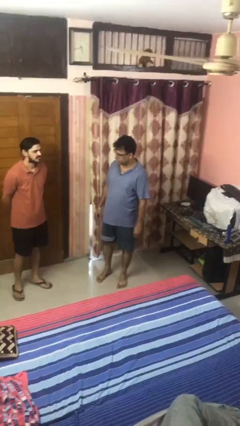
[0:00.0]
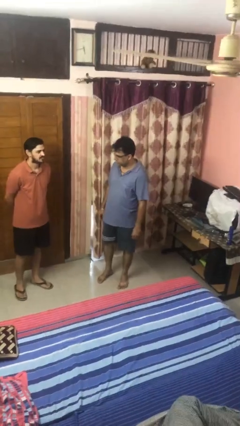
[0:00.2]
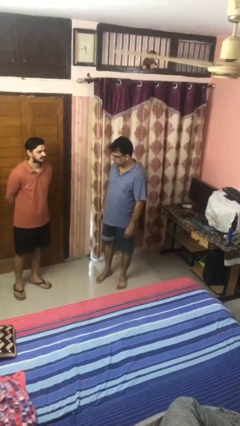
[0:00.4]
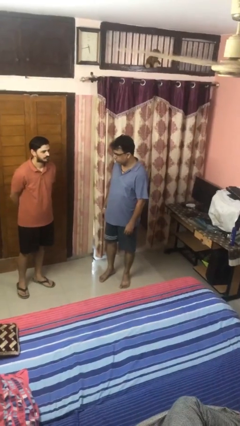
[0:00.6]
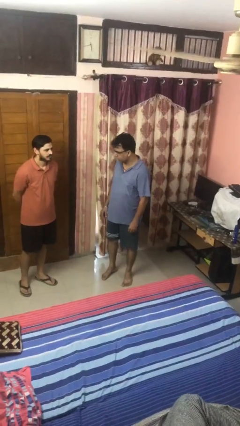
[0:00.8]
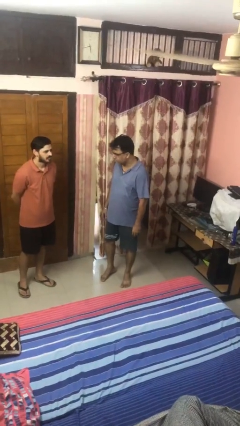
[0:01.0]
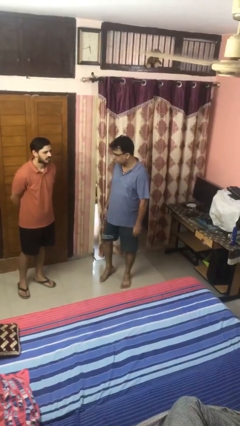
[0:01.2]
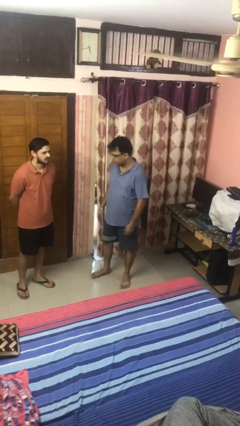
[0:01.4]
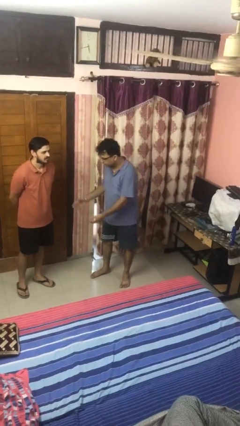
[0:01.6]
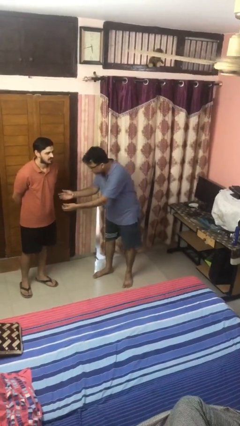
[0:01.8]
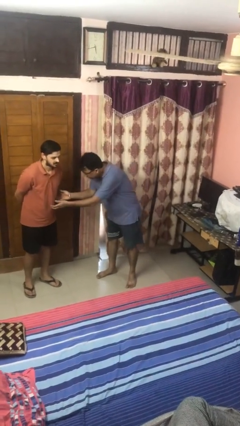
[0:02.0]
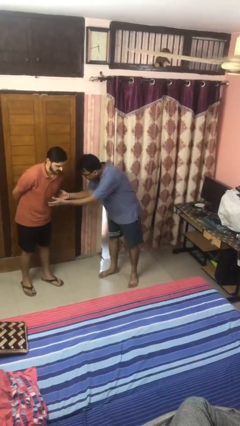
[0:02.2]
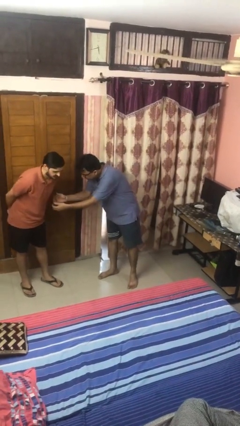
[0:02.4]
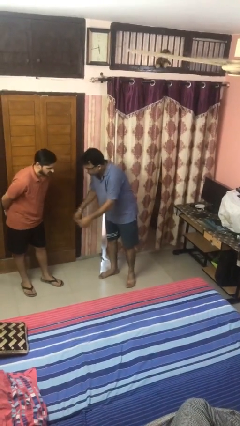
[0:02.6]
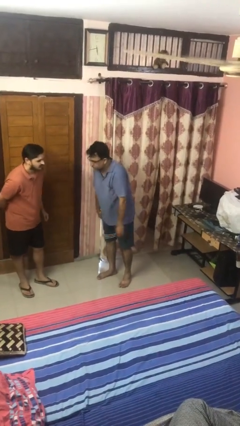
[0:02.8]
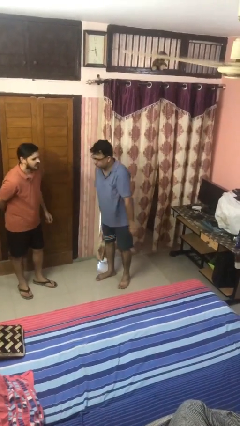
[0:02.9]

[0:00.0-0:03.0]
person tickles person

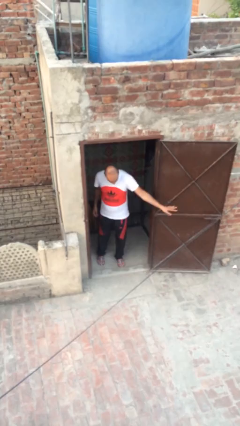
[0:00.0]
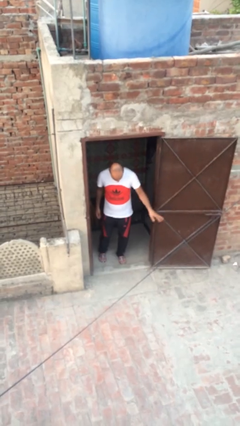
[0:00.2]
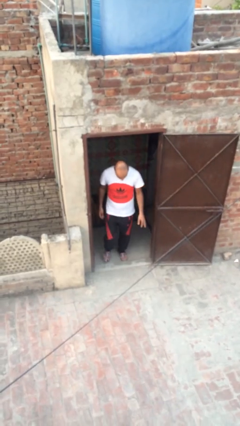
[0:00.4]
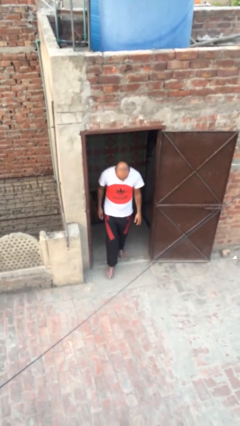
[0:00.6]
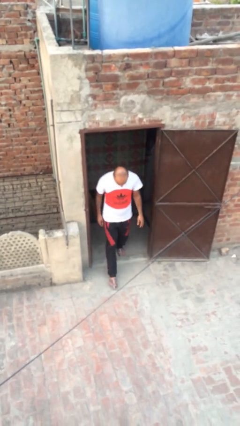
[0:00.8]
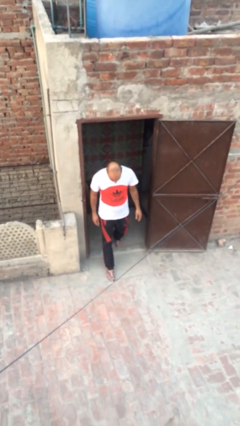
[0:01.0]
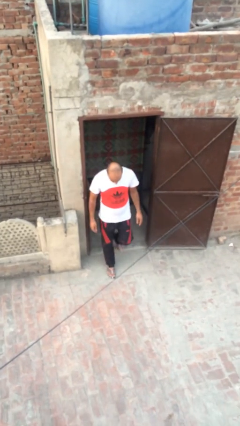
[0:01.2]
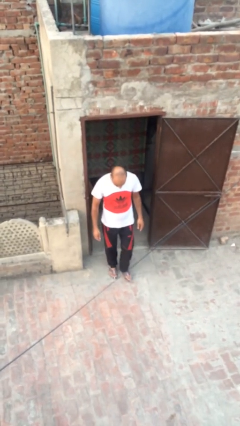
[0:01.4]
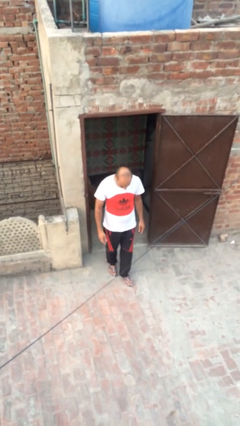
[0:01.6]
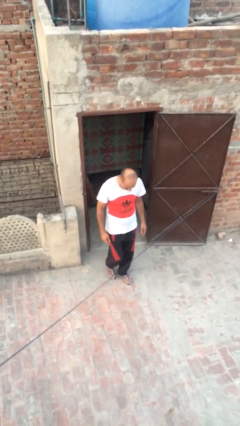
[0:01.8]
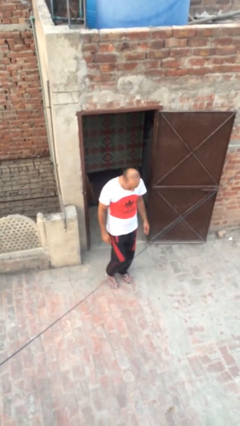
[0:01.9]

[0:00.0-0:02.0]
person enters scene through structure

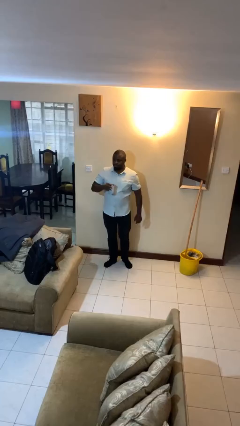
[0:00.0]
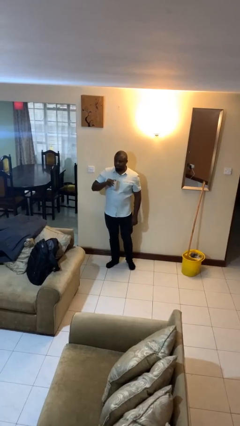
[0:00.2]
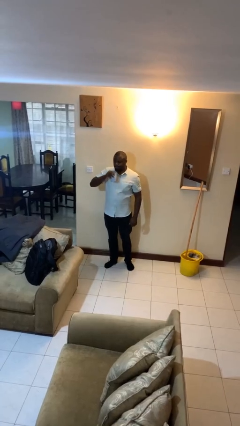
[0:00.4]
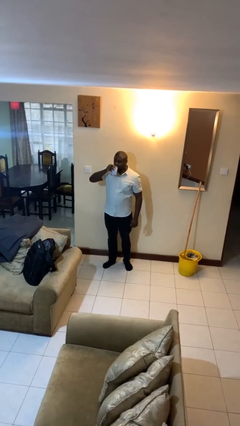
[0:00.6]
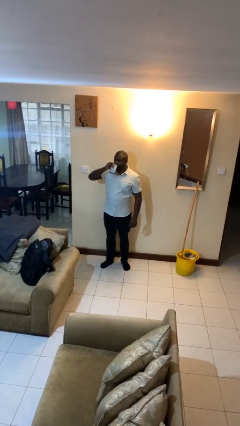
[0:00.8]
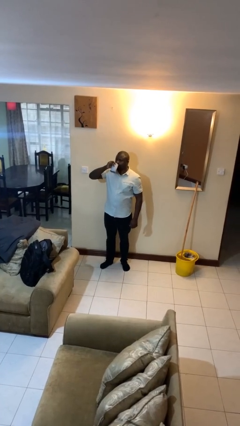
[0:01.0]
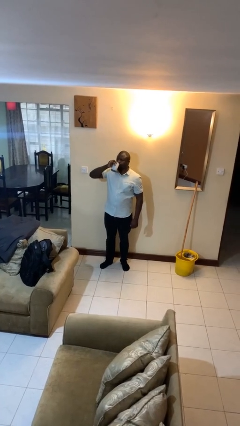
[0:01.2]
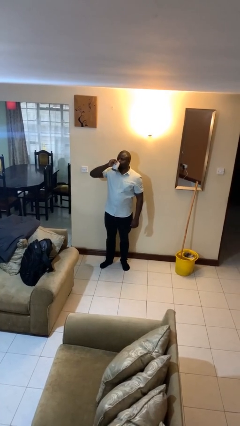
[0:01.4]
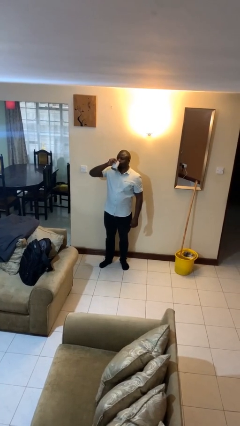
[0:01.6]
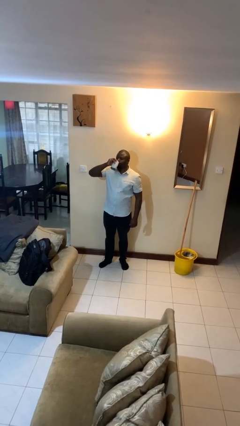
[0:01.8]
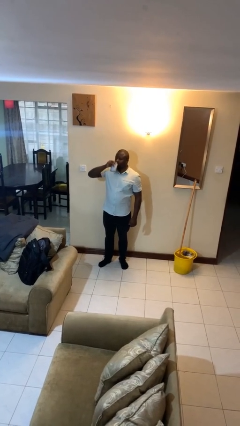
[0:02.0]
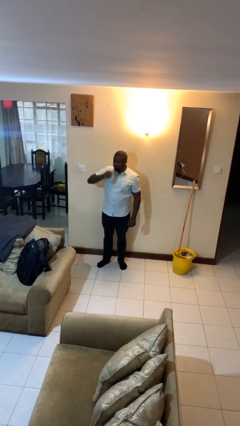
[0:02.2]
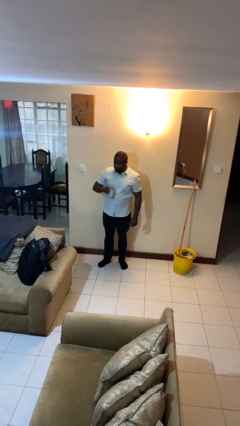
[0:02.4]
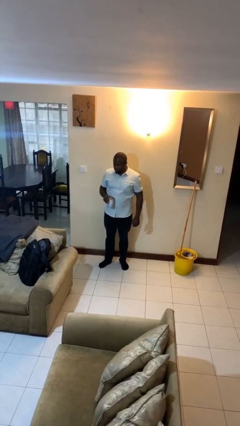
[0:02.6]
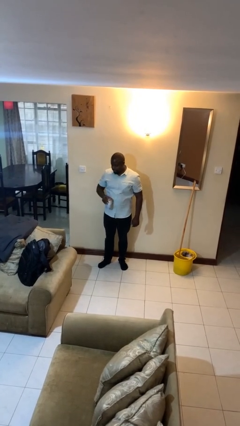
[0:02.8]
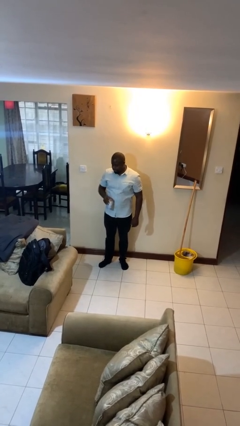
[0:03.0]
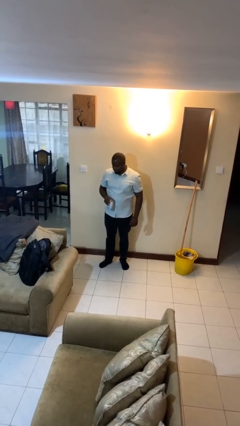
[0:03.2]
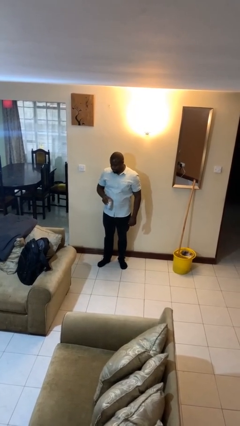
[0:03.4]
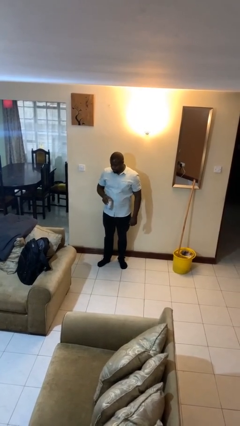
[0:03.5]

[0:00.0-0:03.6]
person drinks from beverage can

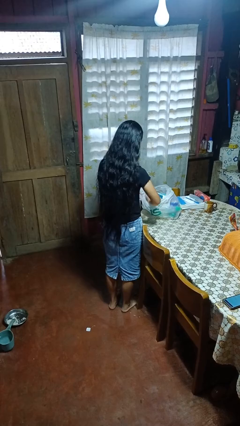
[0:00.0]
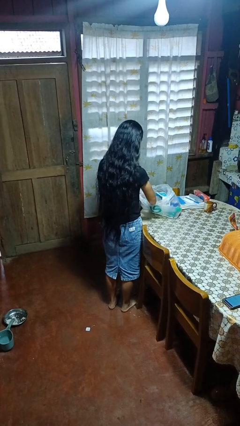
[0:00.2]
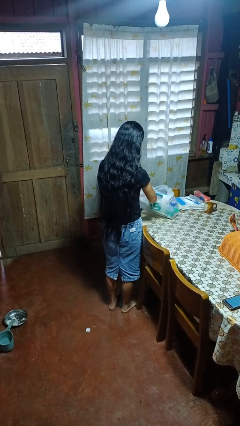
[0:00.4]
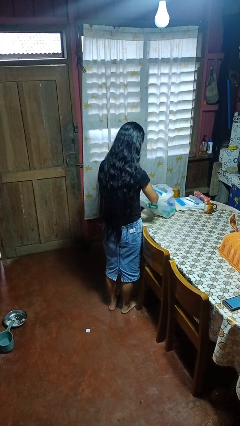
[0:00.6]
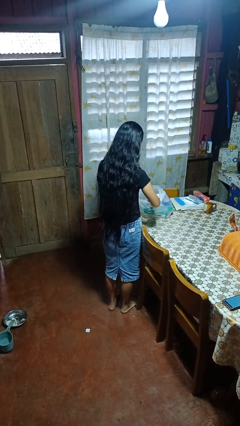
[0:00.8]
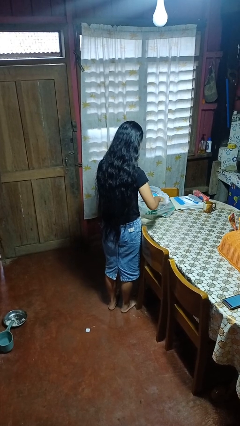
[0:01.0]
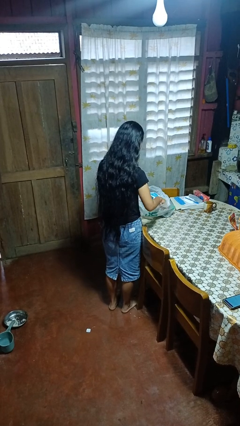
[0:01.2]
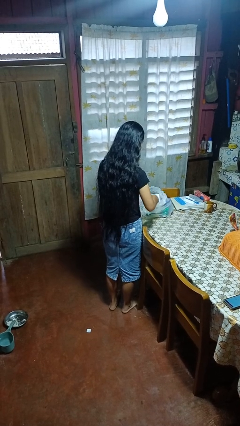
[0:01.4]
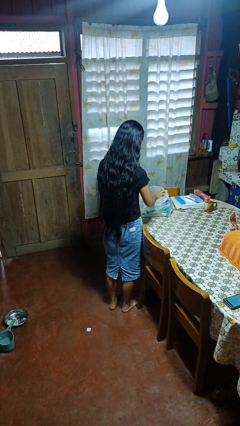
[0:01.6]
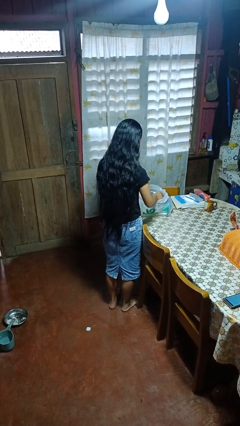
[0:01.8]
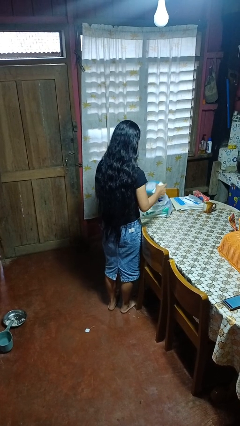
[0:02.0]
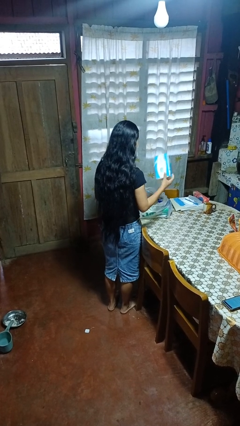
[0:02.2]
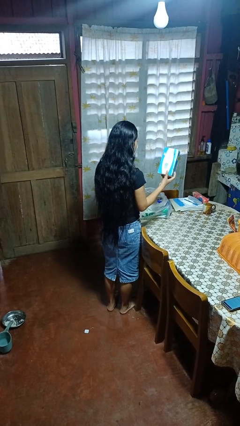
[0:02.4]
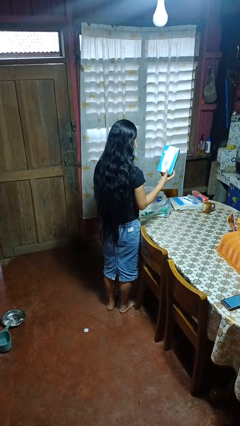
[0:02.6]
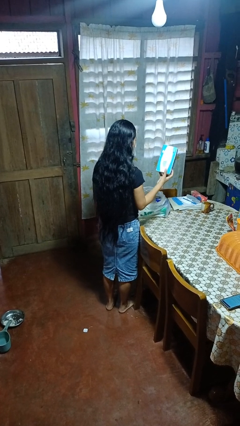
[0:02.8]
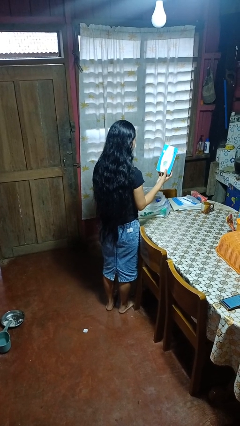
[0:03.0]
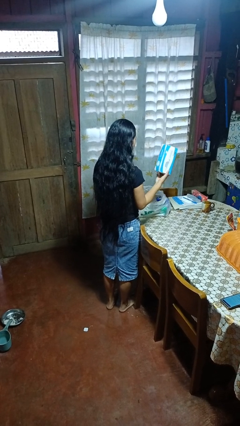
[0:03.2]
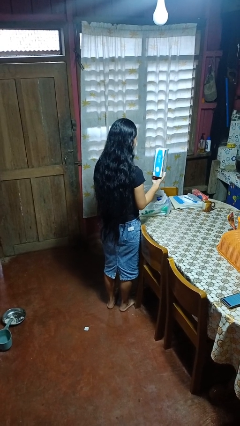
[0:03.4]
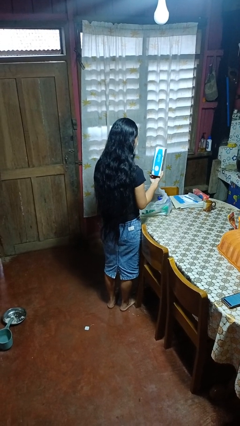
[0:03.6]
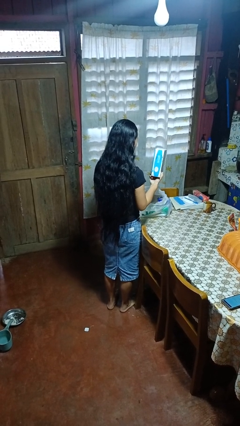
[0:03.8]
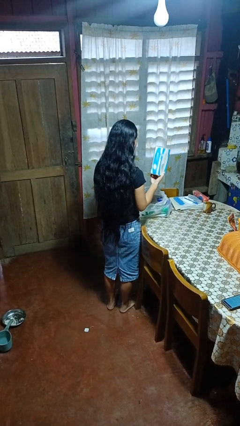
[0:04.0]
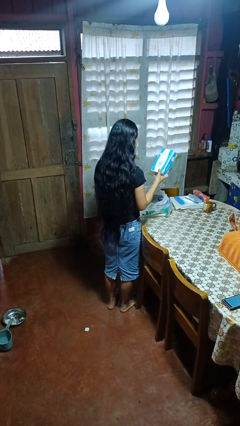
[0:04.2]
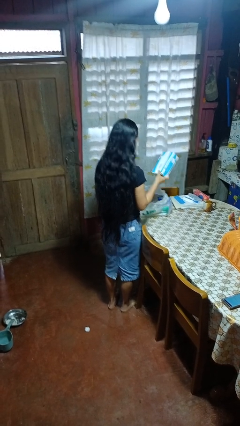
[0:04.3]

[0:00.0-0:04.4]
person takes object from bag

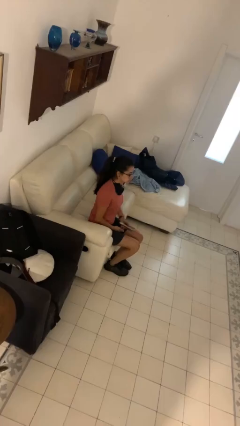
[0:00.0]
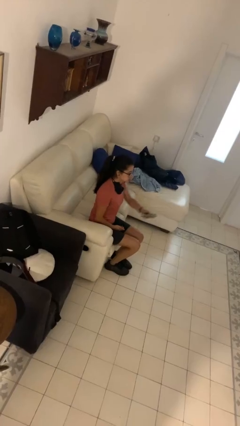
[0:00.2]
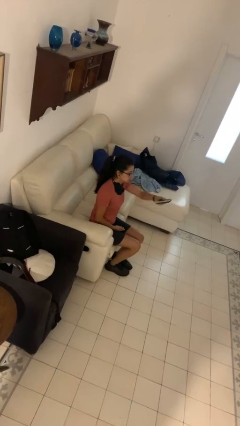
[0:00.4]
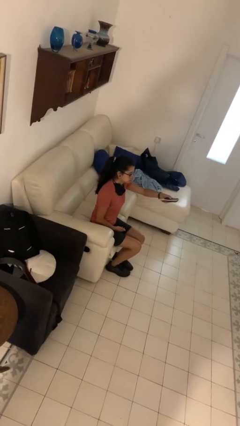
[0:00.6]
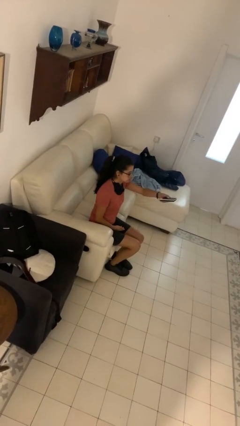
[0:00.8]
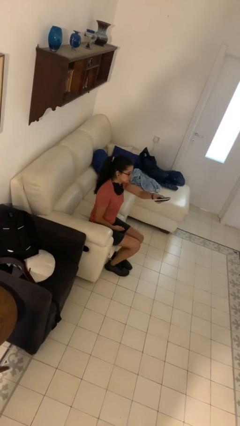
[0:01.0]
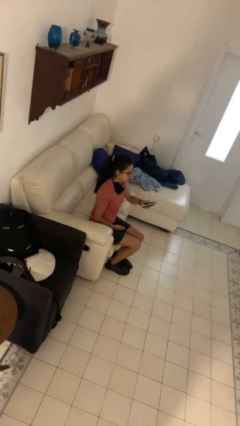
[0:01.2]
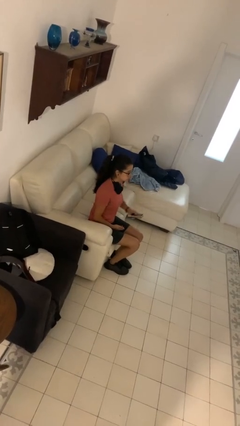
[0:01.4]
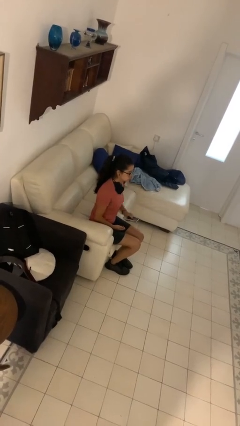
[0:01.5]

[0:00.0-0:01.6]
person uses television remote

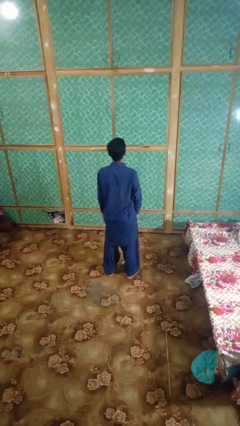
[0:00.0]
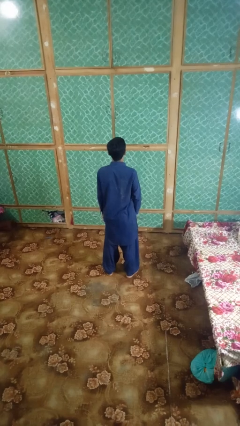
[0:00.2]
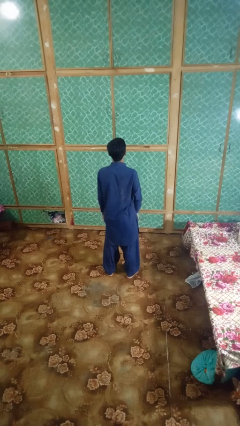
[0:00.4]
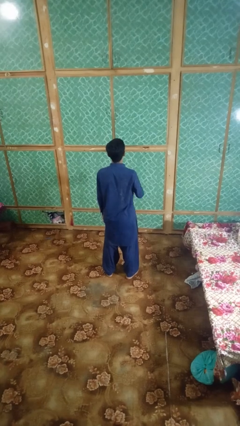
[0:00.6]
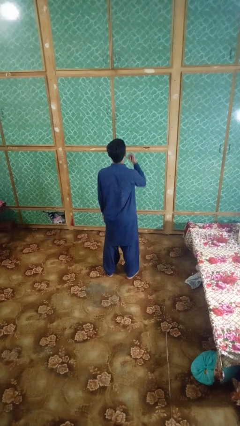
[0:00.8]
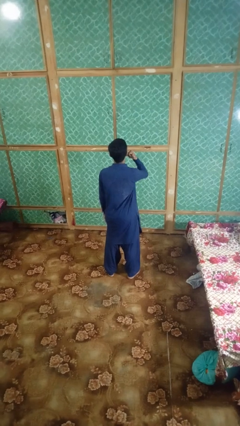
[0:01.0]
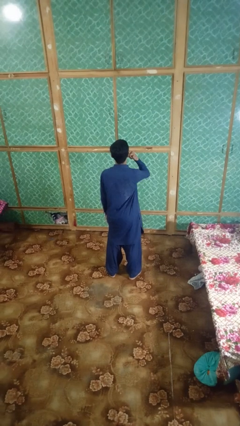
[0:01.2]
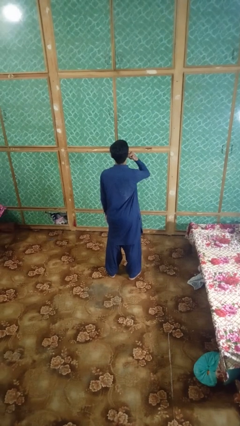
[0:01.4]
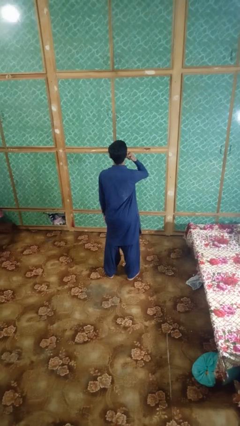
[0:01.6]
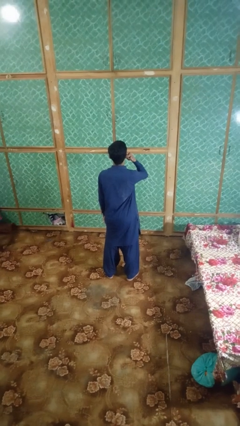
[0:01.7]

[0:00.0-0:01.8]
person gestures call me

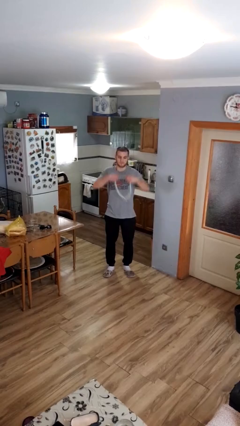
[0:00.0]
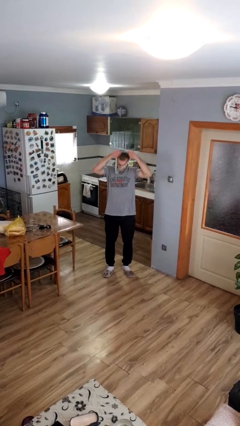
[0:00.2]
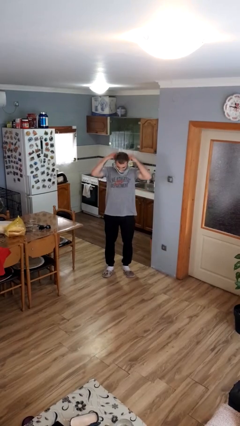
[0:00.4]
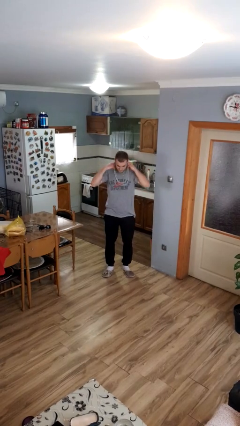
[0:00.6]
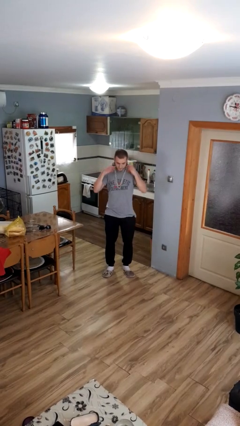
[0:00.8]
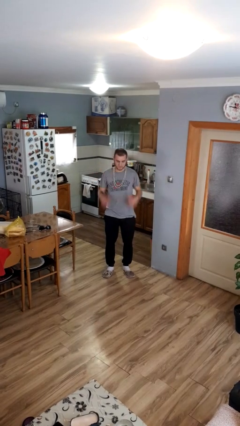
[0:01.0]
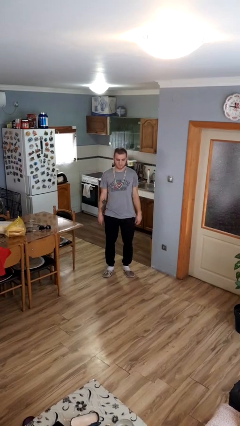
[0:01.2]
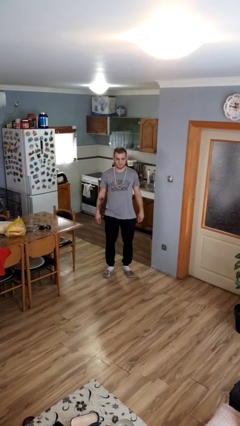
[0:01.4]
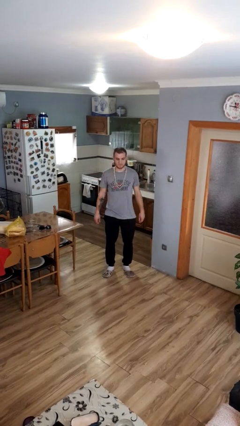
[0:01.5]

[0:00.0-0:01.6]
person puts on necklace
